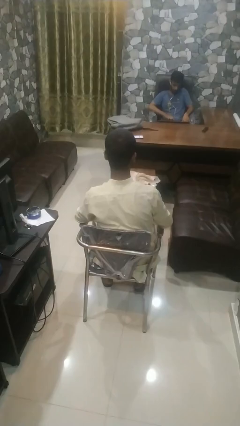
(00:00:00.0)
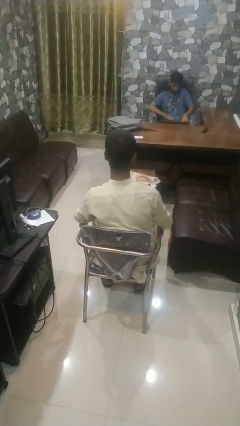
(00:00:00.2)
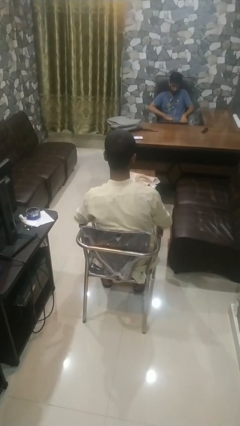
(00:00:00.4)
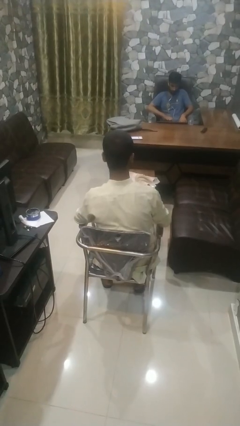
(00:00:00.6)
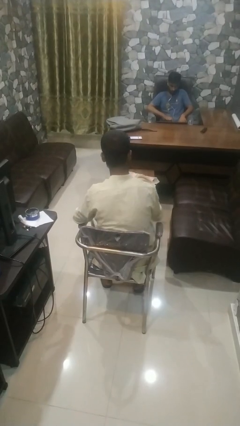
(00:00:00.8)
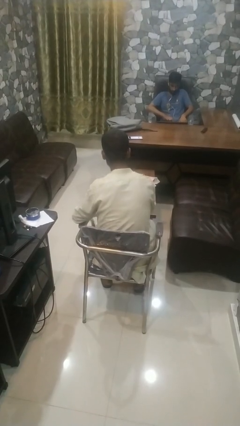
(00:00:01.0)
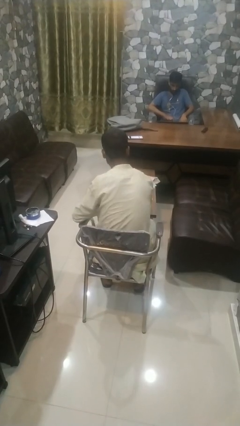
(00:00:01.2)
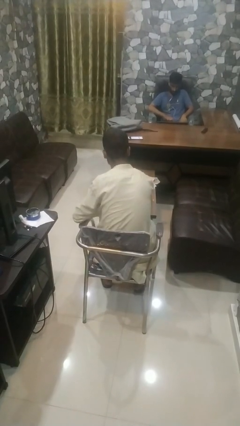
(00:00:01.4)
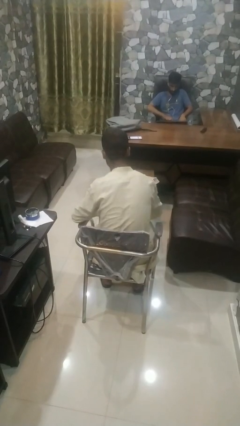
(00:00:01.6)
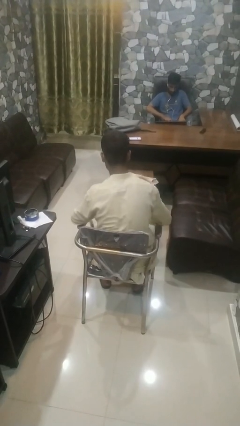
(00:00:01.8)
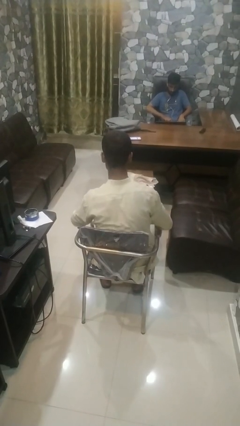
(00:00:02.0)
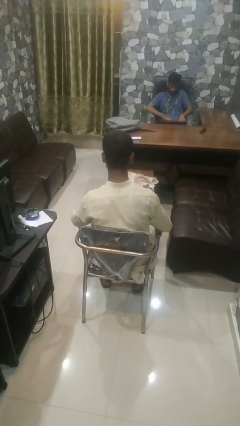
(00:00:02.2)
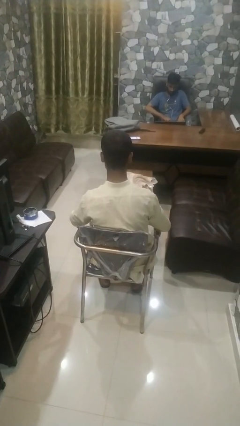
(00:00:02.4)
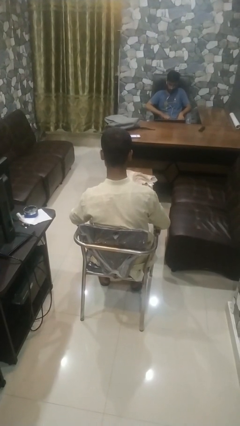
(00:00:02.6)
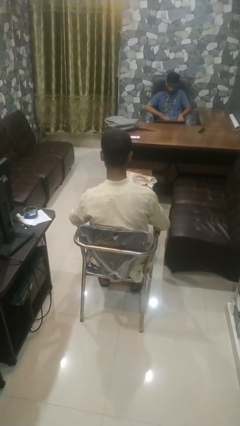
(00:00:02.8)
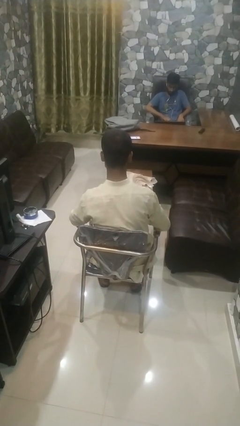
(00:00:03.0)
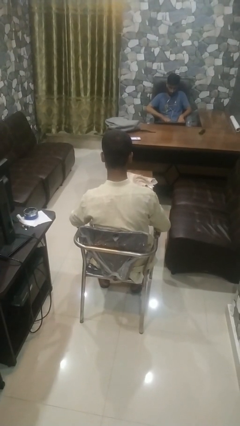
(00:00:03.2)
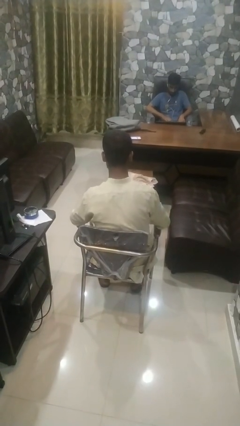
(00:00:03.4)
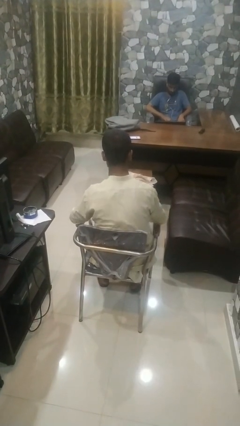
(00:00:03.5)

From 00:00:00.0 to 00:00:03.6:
person paints fingernails

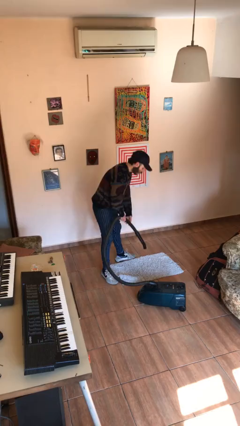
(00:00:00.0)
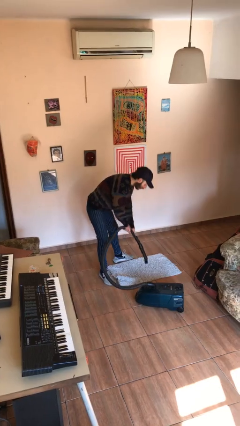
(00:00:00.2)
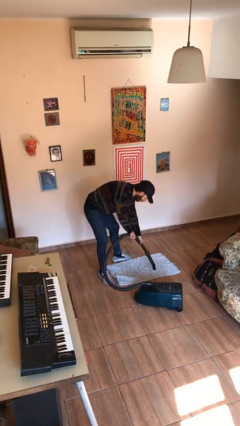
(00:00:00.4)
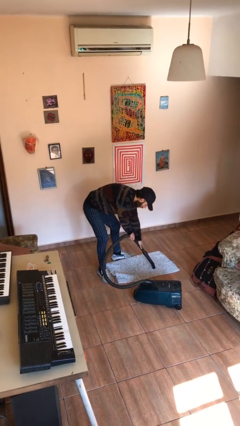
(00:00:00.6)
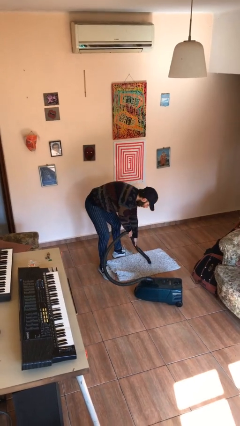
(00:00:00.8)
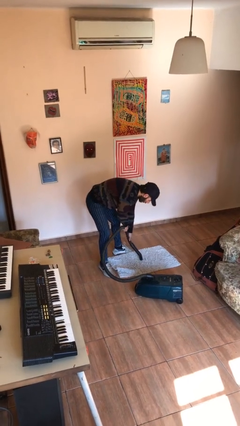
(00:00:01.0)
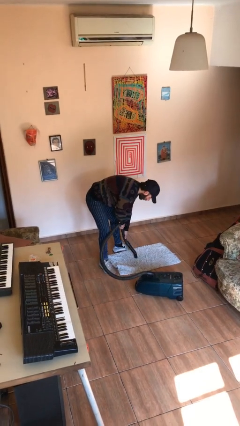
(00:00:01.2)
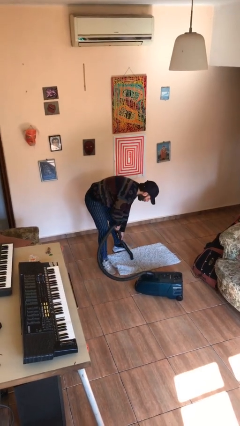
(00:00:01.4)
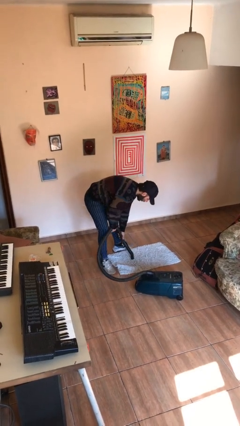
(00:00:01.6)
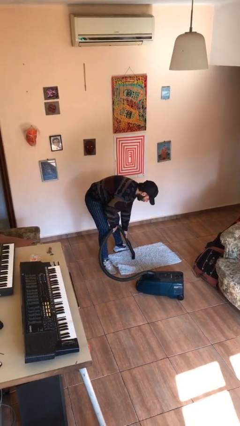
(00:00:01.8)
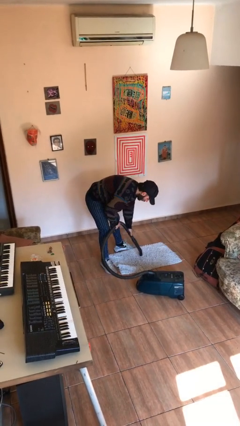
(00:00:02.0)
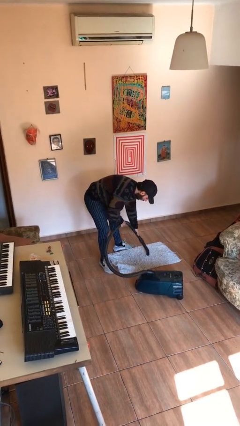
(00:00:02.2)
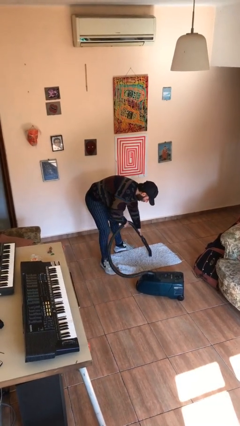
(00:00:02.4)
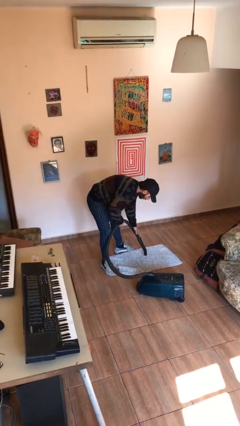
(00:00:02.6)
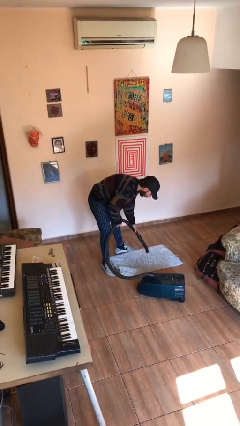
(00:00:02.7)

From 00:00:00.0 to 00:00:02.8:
person vacuums carpet

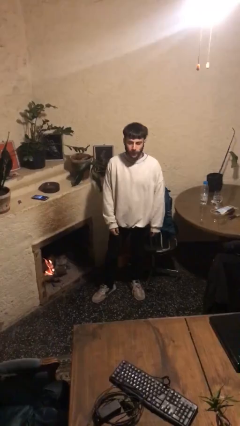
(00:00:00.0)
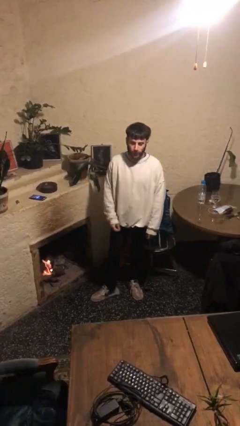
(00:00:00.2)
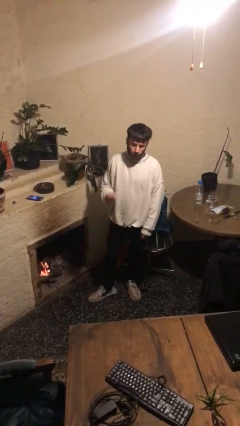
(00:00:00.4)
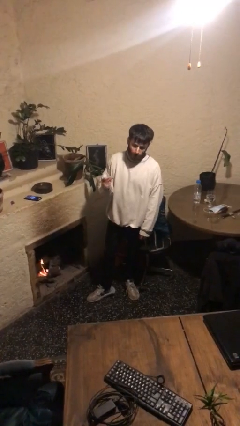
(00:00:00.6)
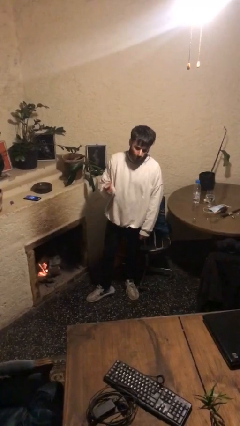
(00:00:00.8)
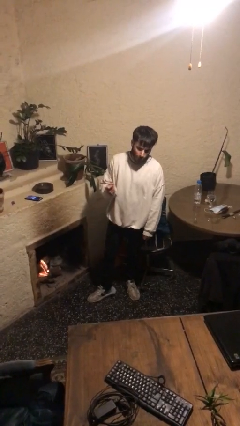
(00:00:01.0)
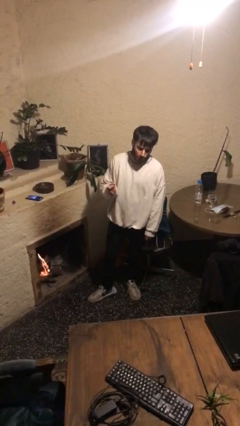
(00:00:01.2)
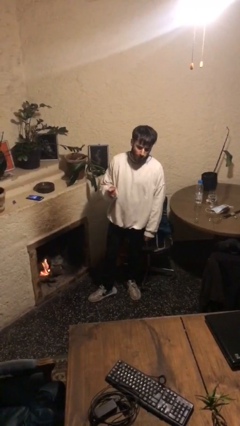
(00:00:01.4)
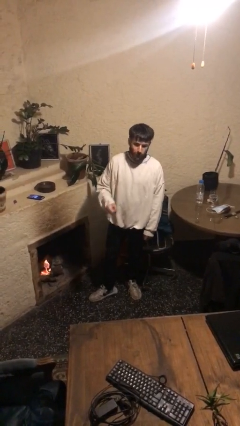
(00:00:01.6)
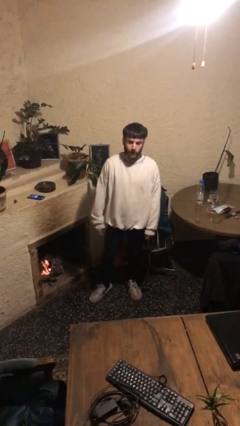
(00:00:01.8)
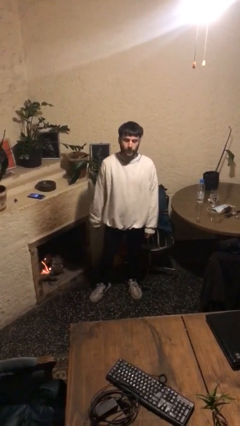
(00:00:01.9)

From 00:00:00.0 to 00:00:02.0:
person snaps fingers

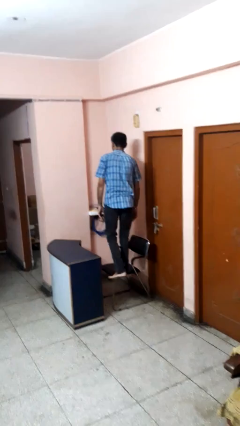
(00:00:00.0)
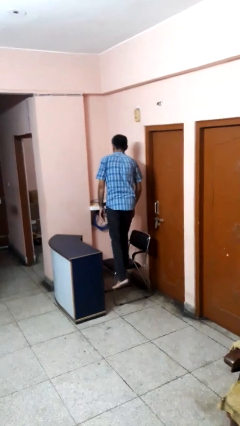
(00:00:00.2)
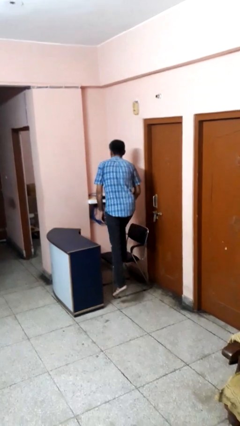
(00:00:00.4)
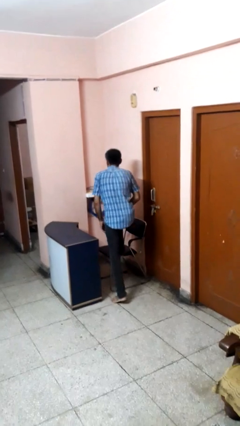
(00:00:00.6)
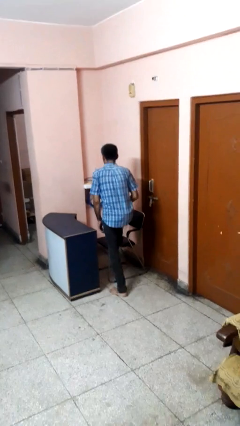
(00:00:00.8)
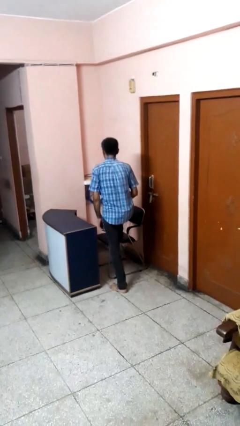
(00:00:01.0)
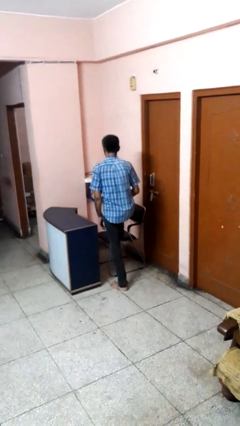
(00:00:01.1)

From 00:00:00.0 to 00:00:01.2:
person climbs off chair

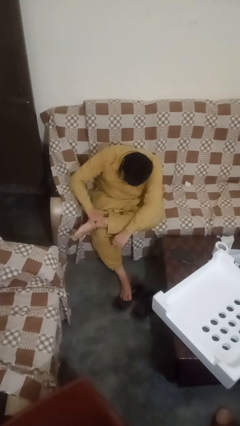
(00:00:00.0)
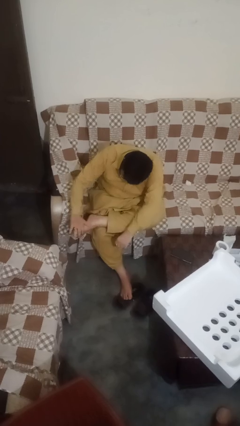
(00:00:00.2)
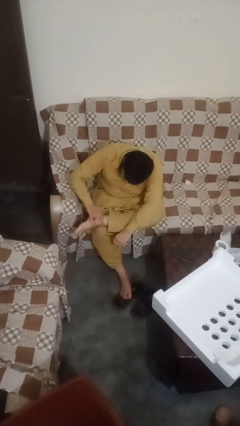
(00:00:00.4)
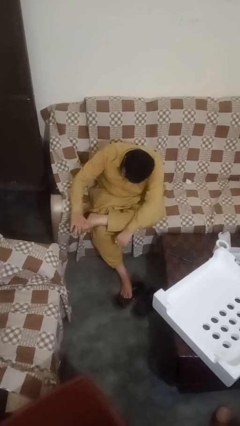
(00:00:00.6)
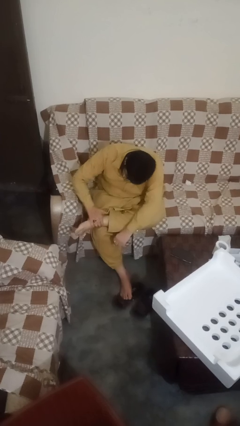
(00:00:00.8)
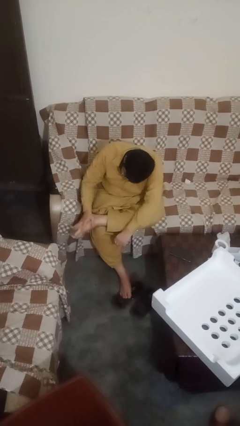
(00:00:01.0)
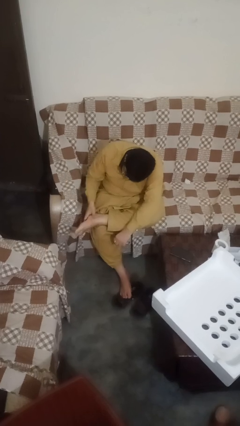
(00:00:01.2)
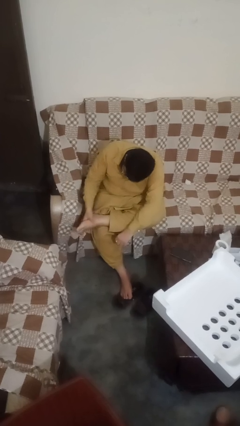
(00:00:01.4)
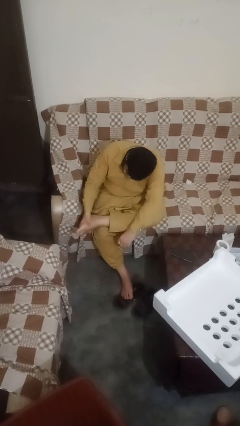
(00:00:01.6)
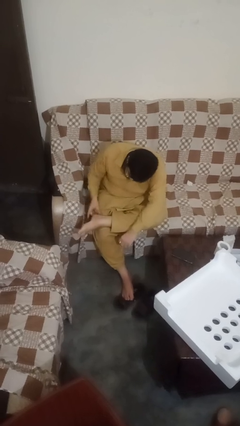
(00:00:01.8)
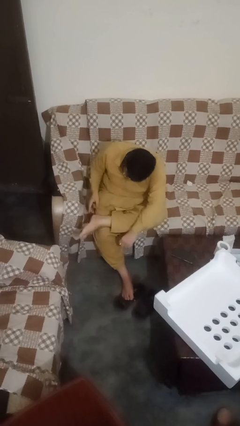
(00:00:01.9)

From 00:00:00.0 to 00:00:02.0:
person rubs foot

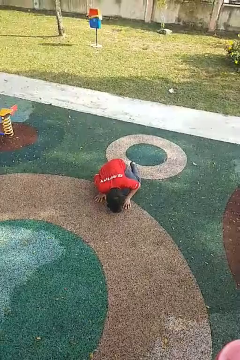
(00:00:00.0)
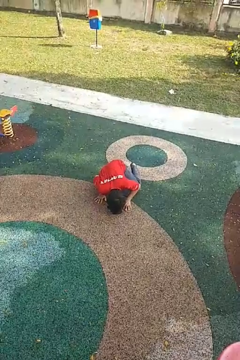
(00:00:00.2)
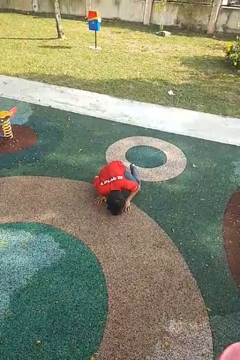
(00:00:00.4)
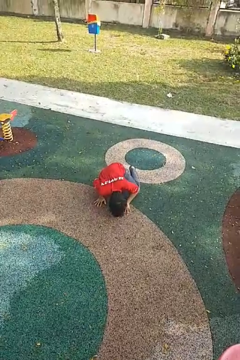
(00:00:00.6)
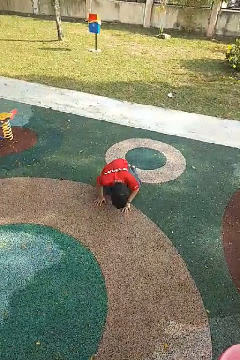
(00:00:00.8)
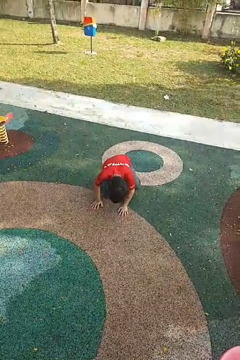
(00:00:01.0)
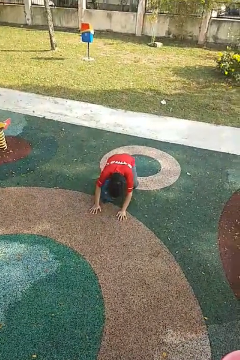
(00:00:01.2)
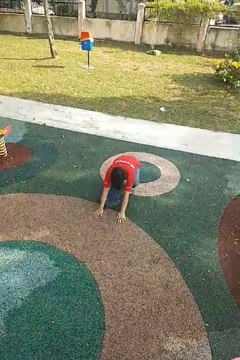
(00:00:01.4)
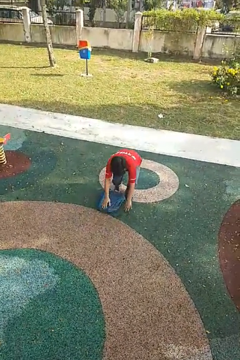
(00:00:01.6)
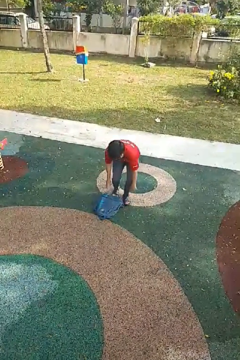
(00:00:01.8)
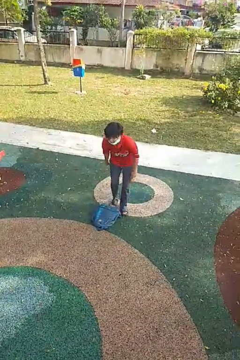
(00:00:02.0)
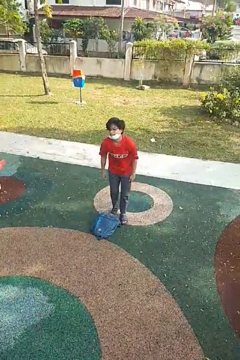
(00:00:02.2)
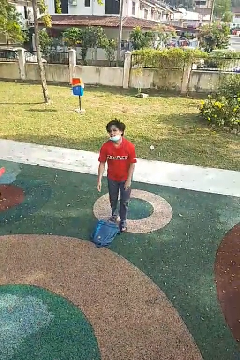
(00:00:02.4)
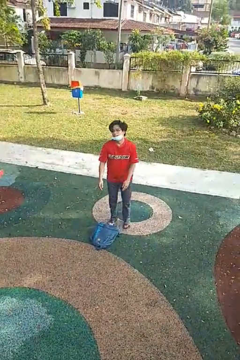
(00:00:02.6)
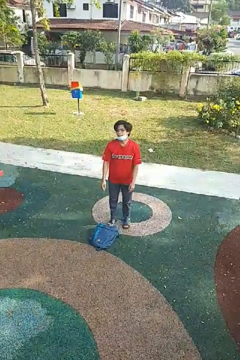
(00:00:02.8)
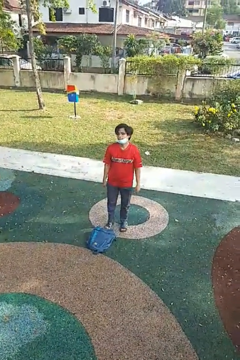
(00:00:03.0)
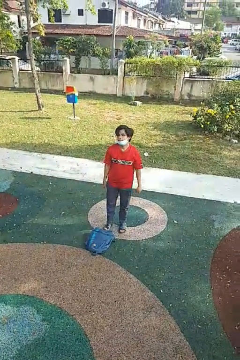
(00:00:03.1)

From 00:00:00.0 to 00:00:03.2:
person stands up from floor

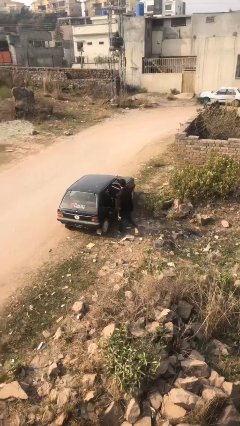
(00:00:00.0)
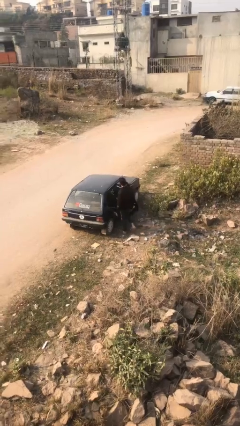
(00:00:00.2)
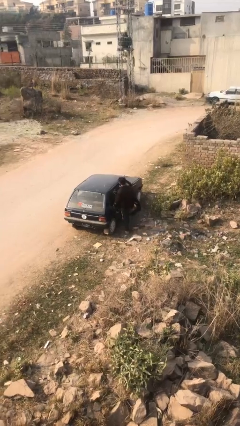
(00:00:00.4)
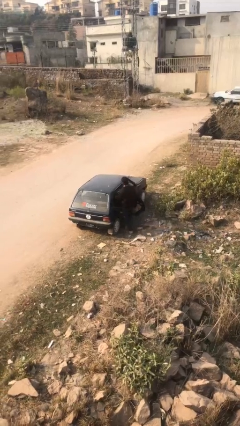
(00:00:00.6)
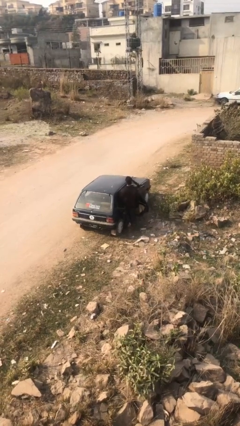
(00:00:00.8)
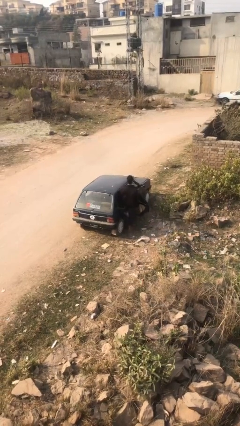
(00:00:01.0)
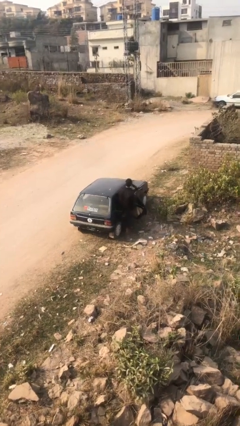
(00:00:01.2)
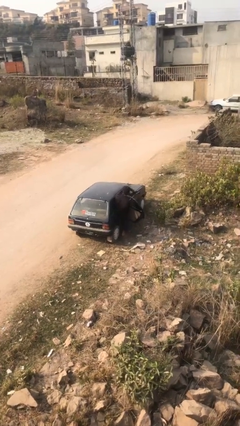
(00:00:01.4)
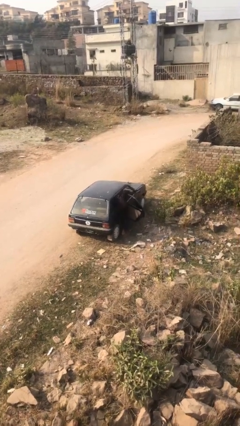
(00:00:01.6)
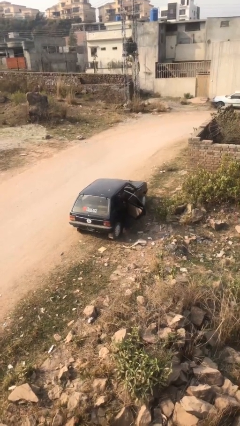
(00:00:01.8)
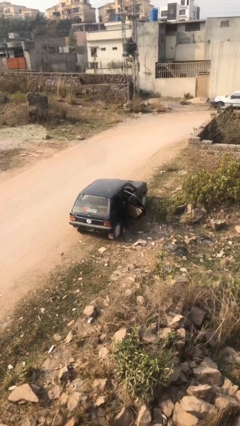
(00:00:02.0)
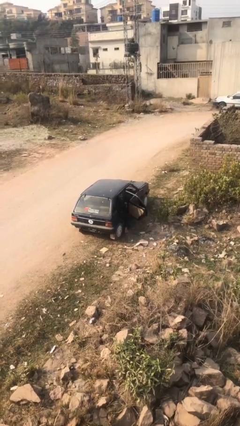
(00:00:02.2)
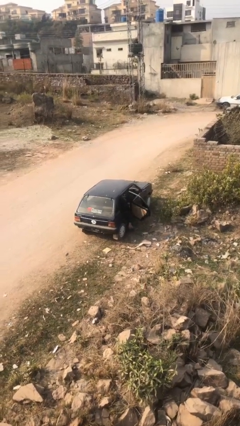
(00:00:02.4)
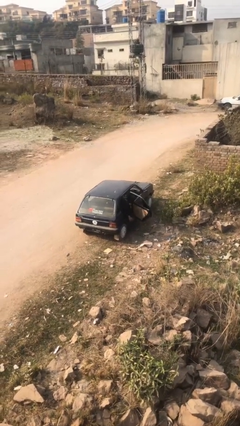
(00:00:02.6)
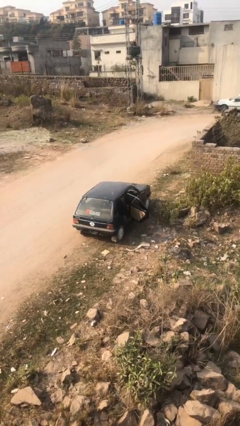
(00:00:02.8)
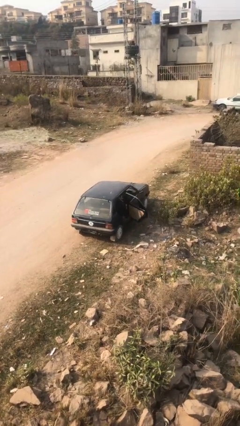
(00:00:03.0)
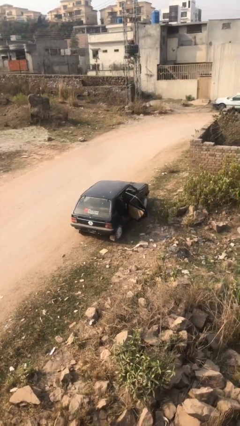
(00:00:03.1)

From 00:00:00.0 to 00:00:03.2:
person enters car
